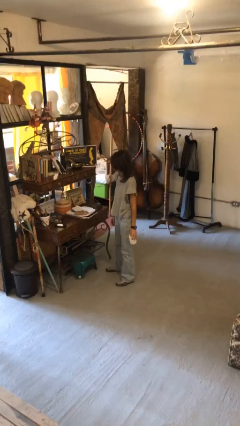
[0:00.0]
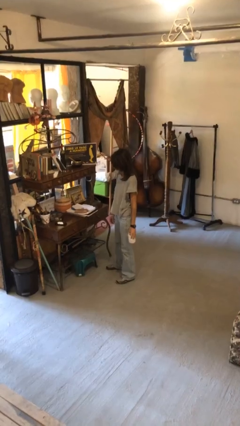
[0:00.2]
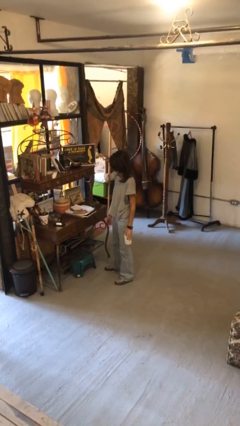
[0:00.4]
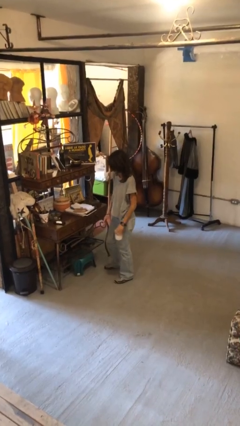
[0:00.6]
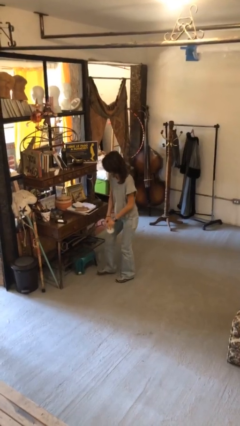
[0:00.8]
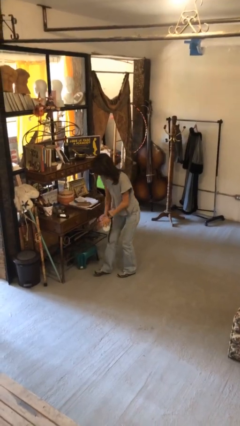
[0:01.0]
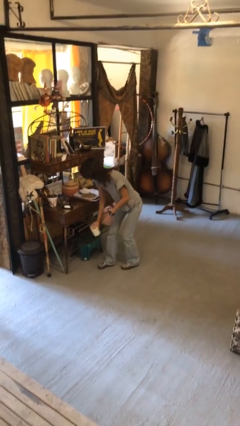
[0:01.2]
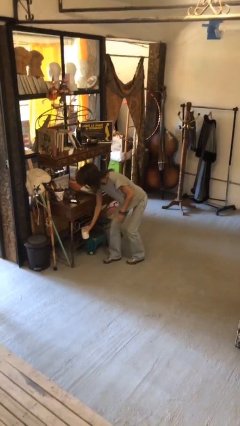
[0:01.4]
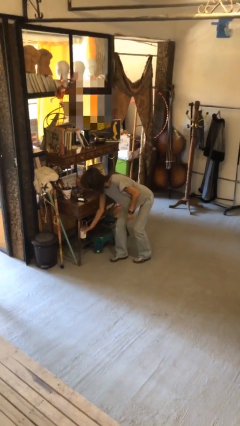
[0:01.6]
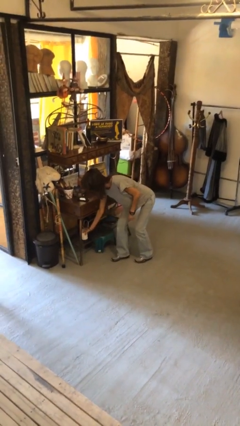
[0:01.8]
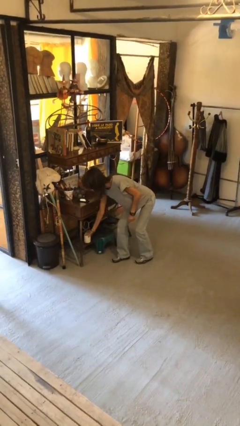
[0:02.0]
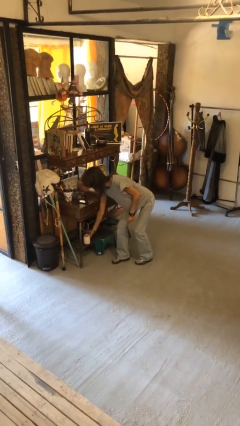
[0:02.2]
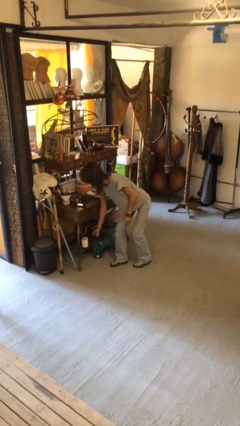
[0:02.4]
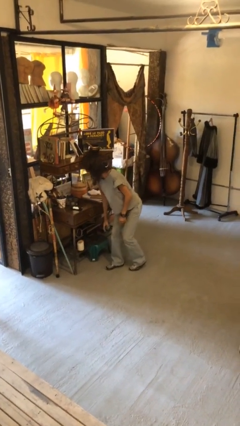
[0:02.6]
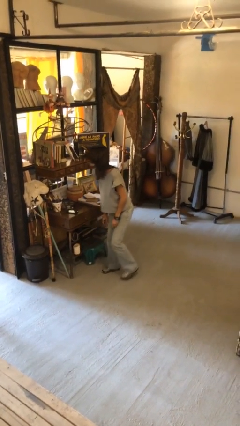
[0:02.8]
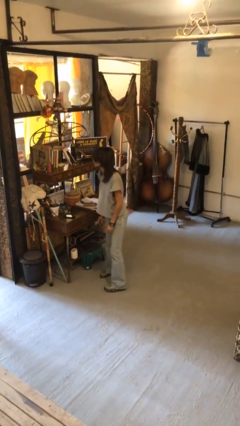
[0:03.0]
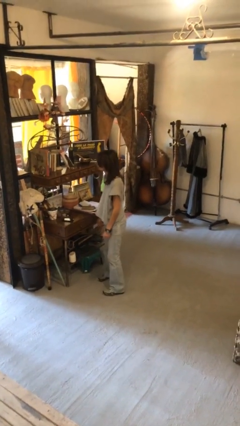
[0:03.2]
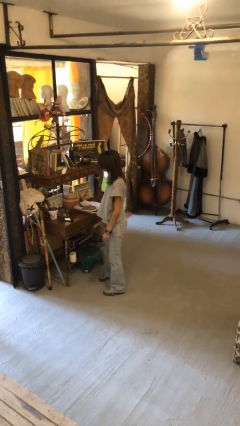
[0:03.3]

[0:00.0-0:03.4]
person puts down object into cabinet

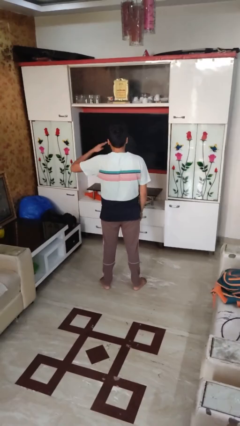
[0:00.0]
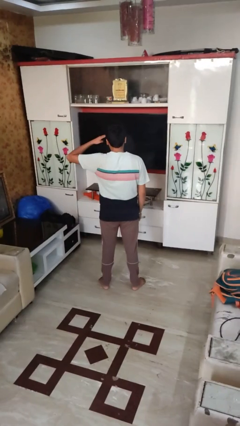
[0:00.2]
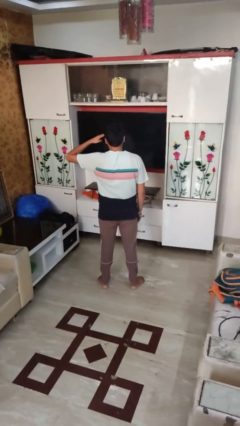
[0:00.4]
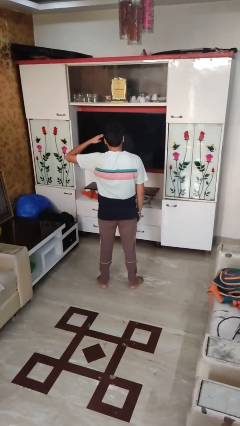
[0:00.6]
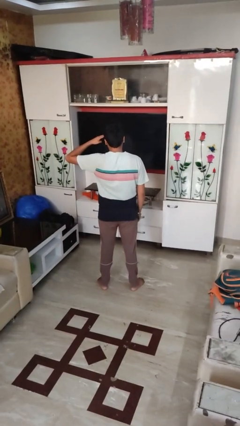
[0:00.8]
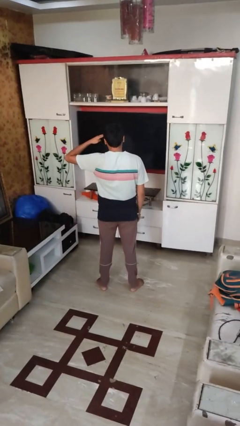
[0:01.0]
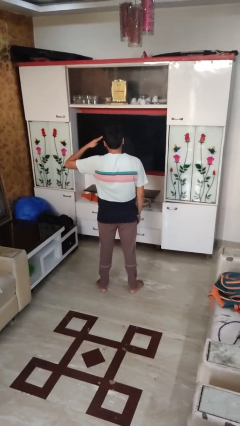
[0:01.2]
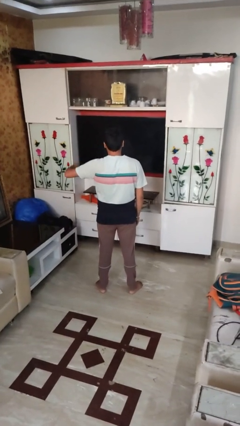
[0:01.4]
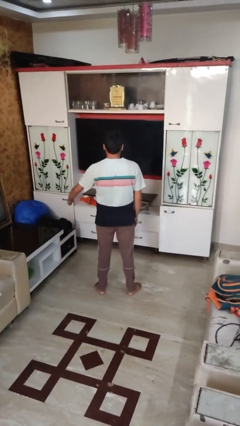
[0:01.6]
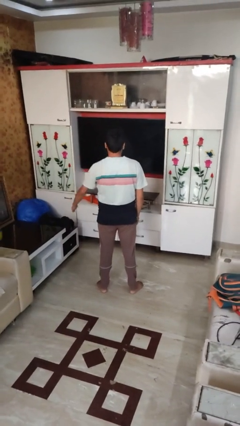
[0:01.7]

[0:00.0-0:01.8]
person salutes

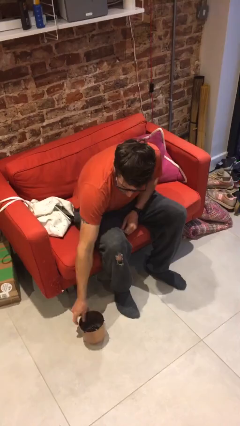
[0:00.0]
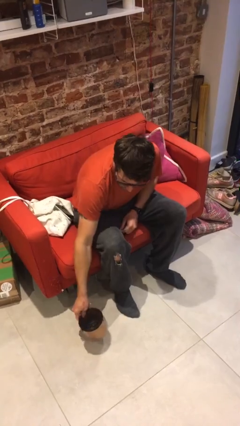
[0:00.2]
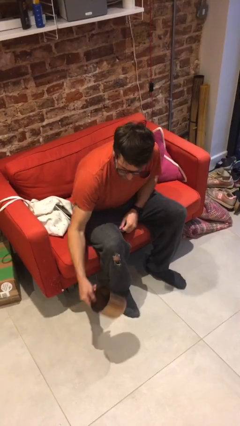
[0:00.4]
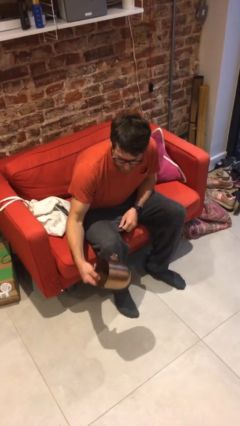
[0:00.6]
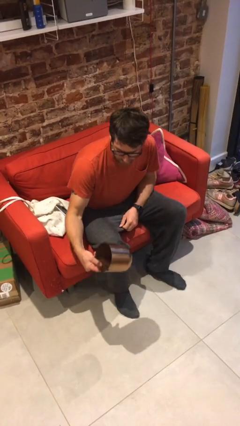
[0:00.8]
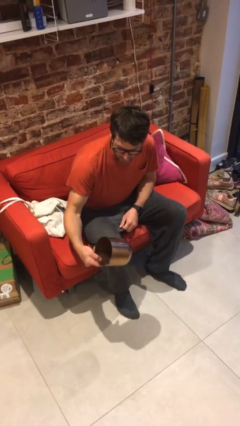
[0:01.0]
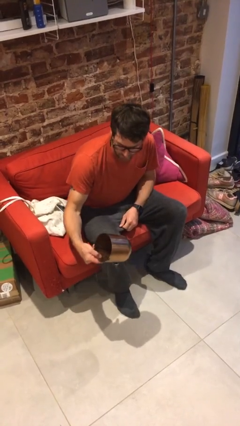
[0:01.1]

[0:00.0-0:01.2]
person picks up object from floor

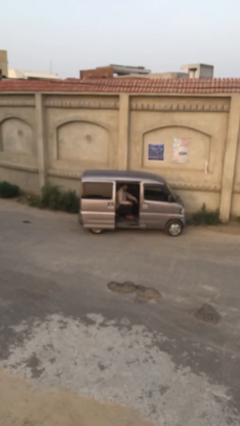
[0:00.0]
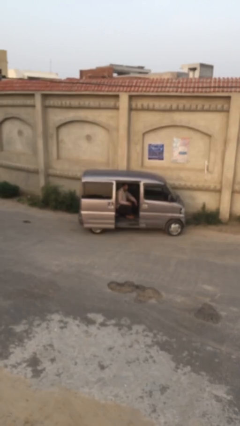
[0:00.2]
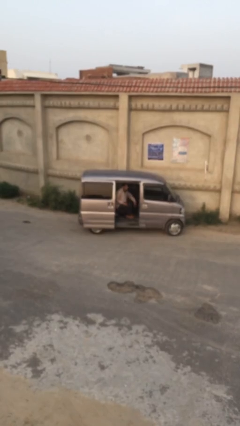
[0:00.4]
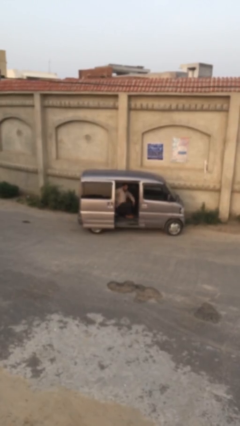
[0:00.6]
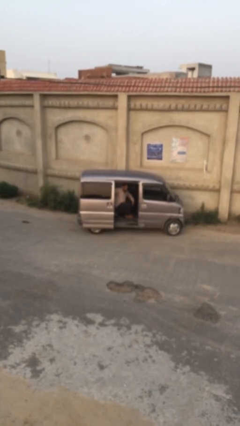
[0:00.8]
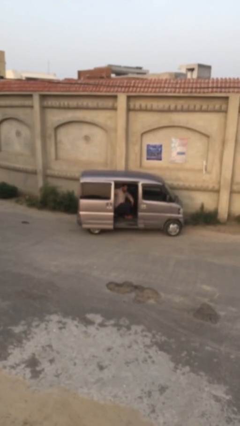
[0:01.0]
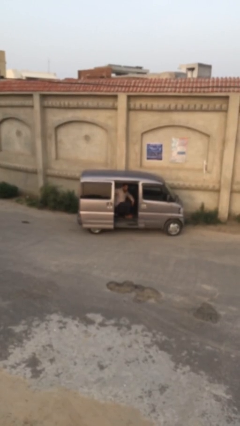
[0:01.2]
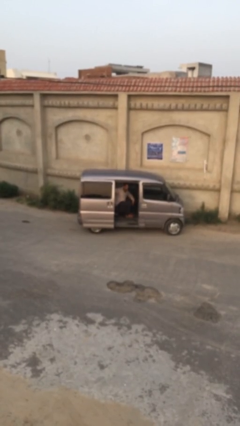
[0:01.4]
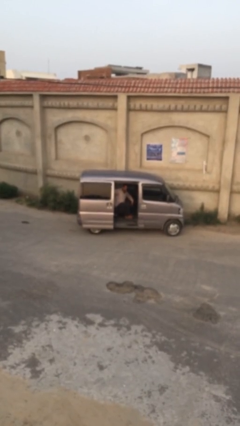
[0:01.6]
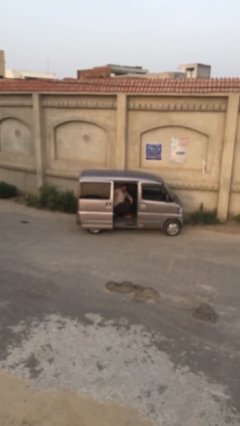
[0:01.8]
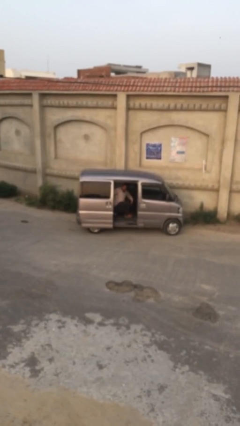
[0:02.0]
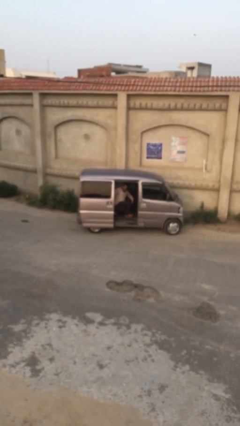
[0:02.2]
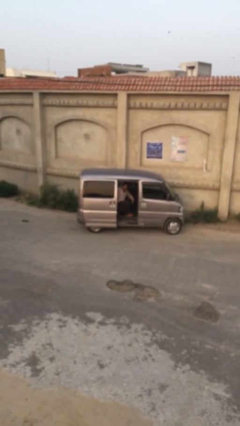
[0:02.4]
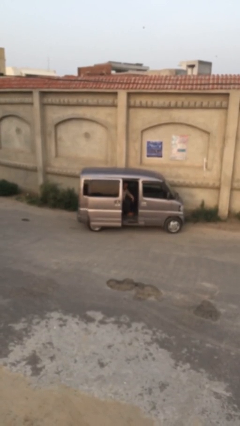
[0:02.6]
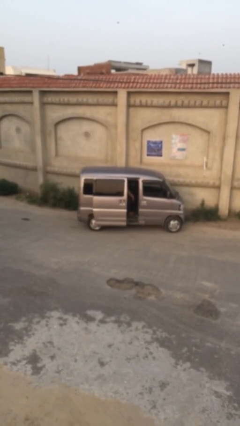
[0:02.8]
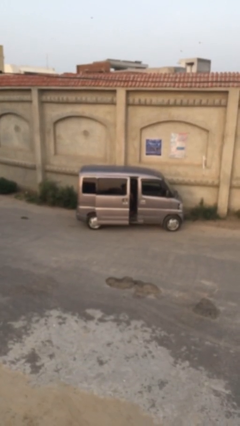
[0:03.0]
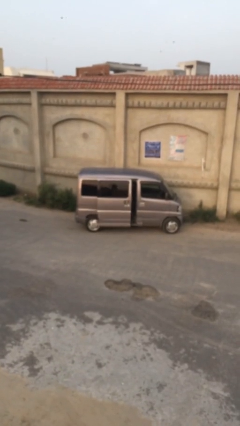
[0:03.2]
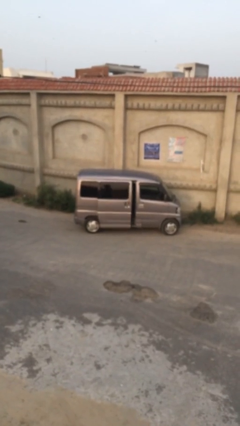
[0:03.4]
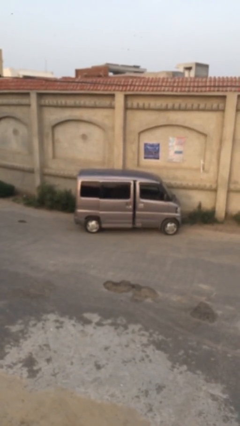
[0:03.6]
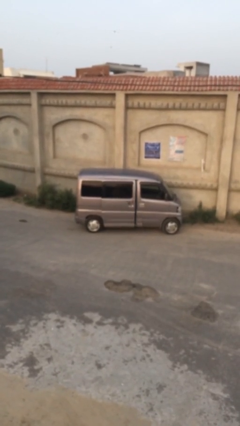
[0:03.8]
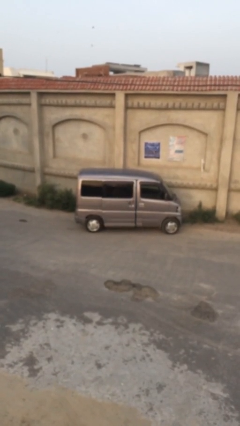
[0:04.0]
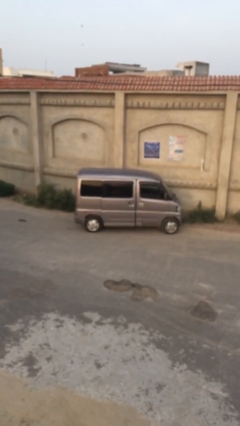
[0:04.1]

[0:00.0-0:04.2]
person closes car door

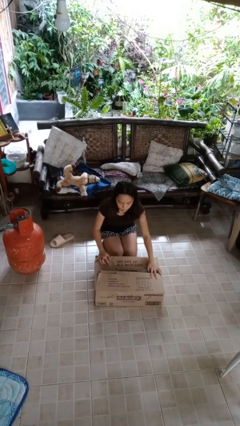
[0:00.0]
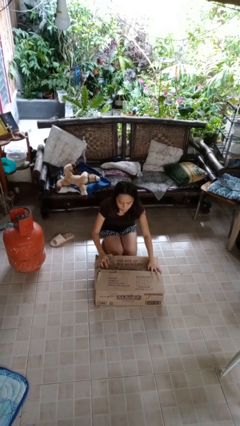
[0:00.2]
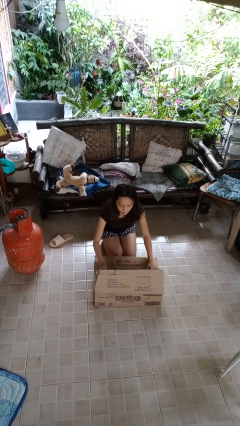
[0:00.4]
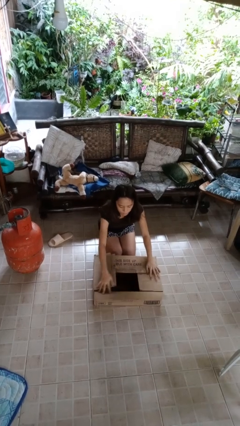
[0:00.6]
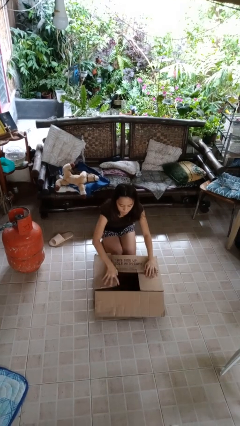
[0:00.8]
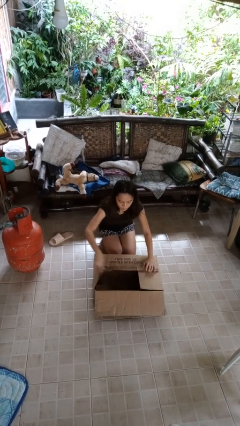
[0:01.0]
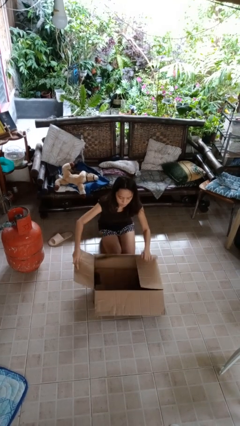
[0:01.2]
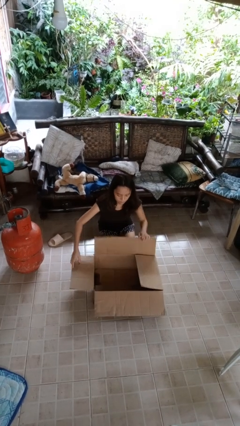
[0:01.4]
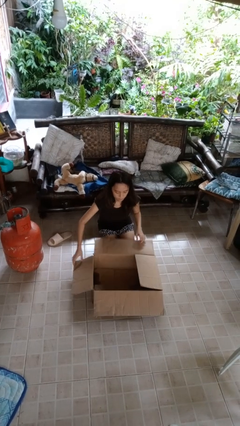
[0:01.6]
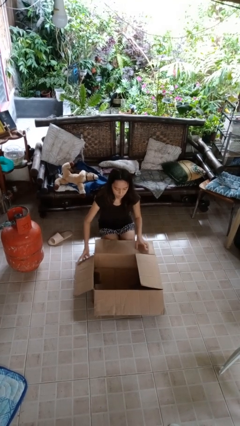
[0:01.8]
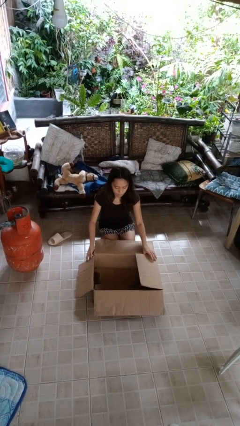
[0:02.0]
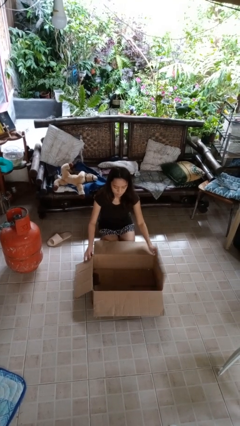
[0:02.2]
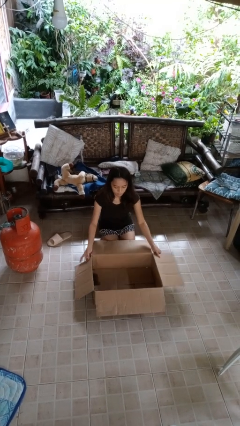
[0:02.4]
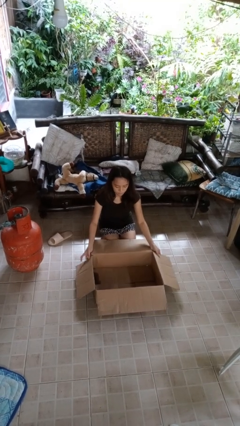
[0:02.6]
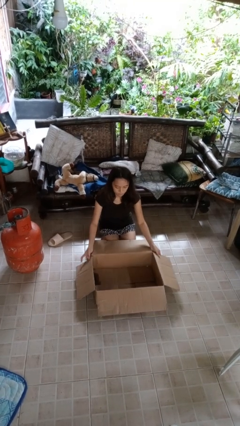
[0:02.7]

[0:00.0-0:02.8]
person opens box

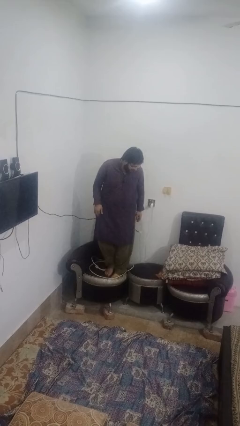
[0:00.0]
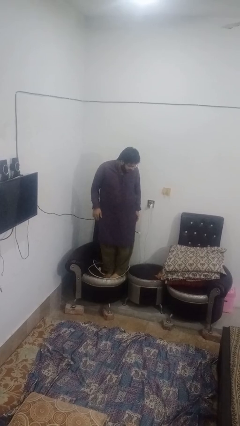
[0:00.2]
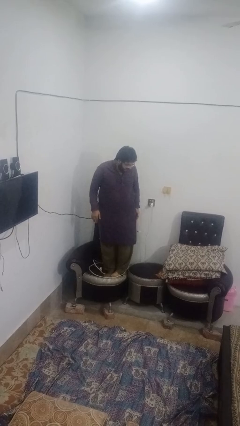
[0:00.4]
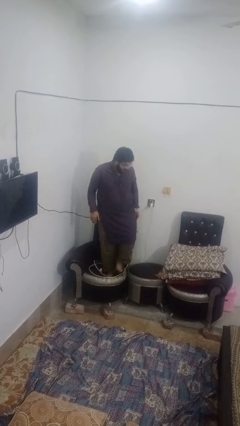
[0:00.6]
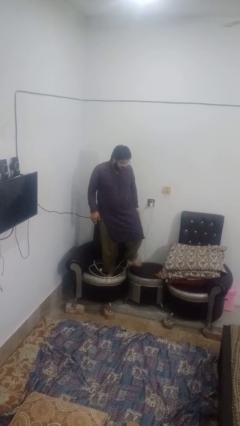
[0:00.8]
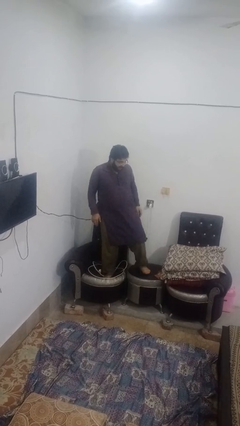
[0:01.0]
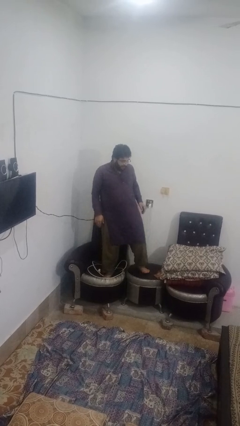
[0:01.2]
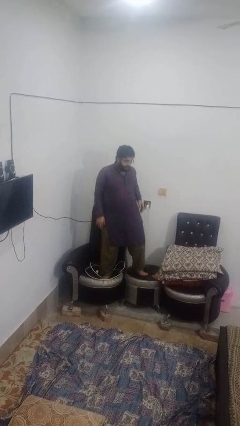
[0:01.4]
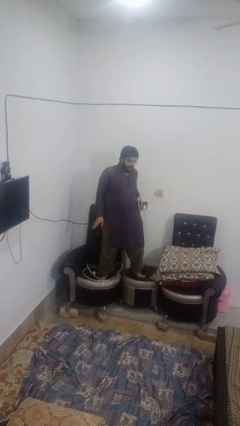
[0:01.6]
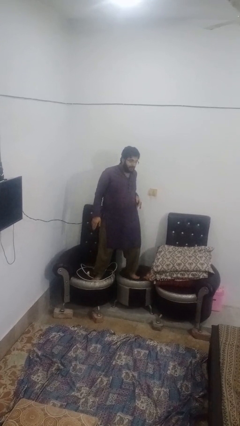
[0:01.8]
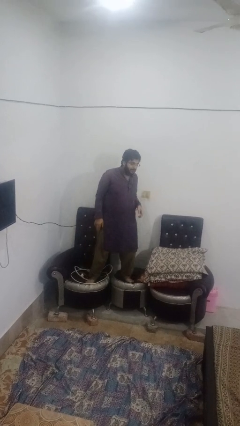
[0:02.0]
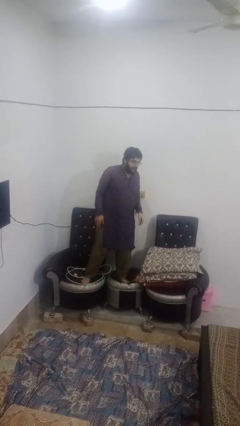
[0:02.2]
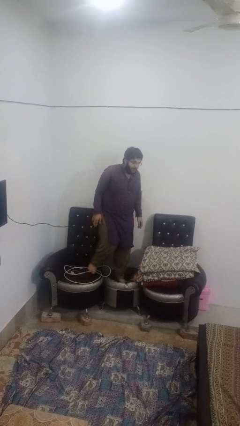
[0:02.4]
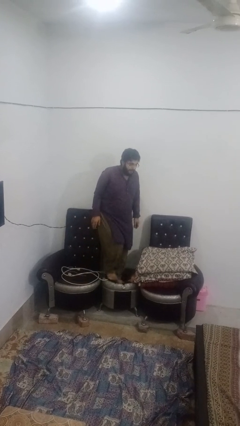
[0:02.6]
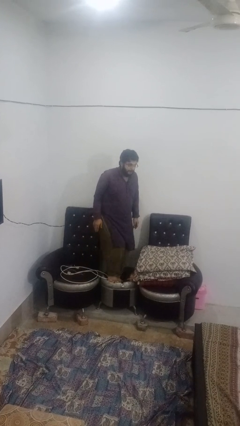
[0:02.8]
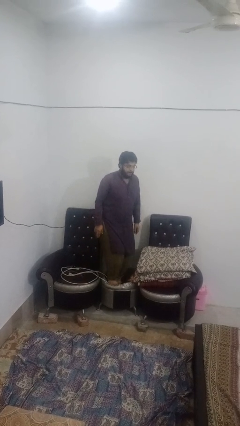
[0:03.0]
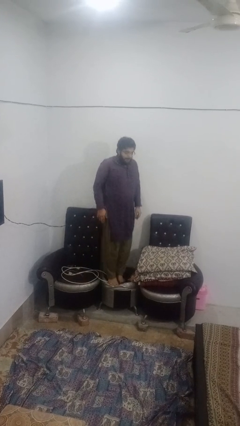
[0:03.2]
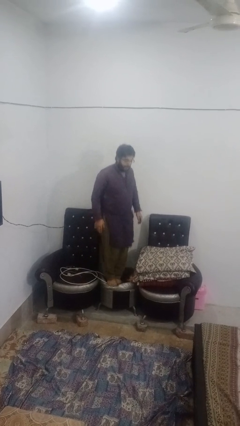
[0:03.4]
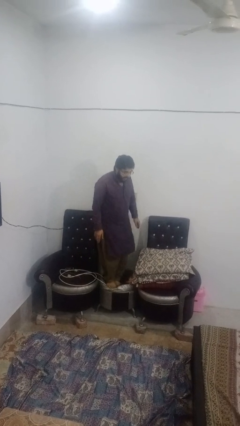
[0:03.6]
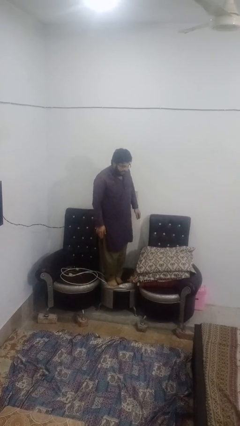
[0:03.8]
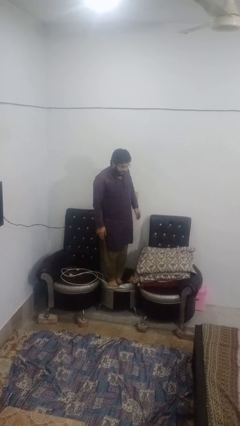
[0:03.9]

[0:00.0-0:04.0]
person jumps on couch

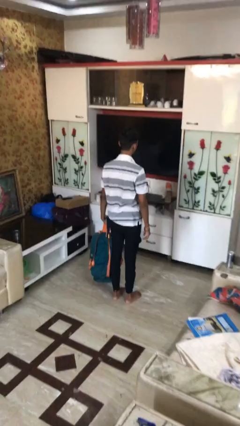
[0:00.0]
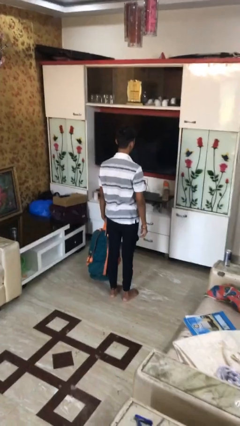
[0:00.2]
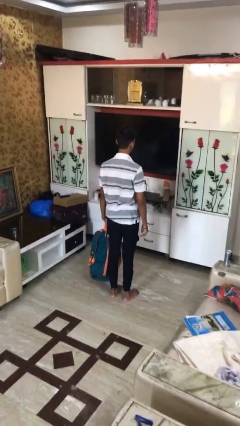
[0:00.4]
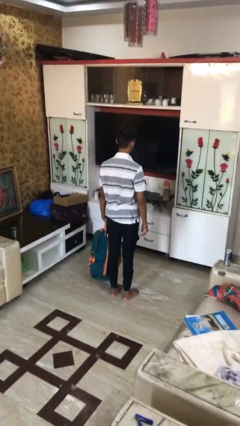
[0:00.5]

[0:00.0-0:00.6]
person puts on backpack
